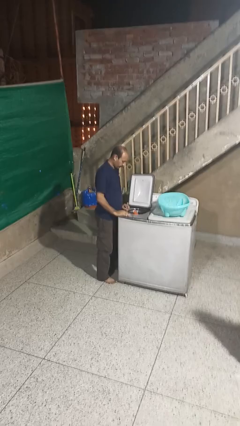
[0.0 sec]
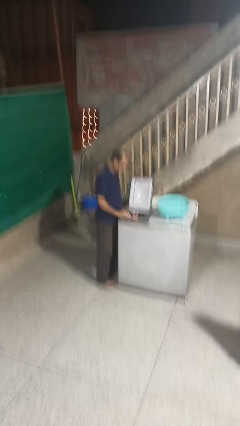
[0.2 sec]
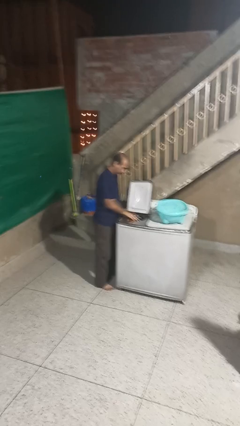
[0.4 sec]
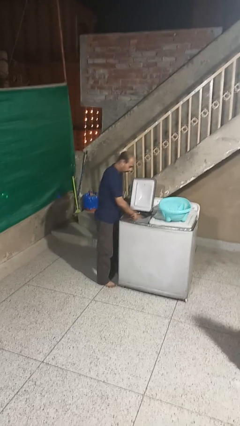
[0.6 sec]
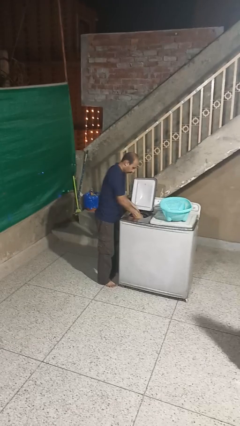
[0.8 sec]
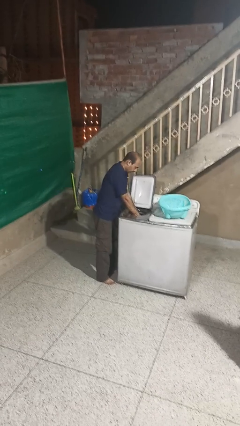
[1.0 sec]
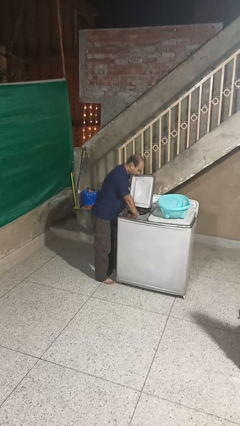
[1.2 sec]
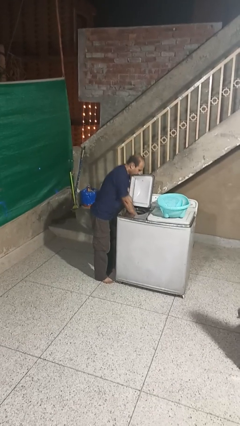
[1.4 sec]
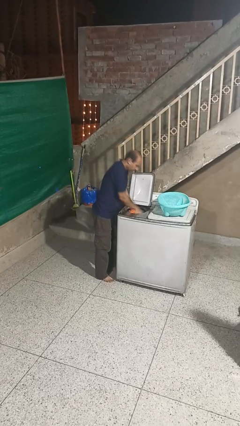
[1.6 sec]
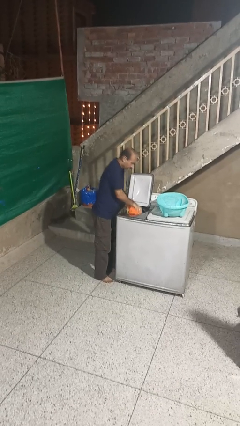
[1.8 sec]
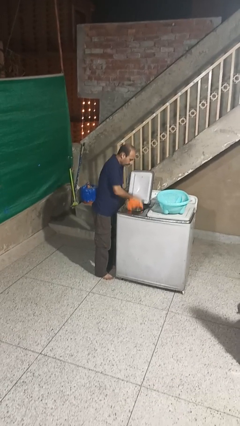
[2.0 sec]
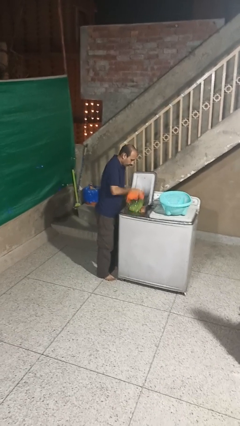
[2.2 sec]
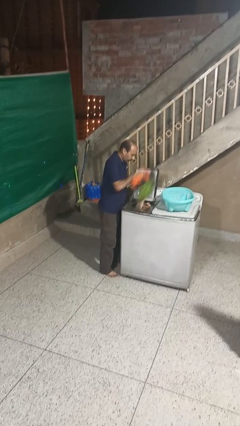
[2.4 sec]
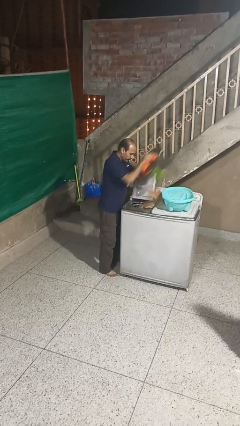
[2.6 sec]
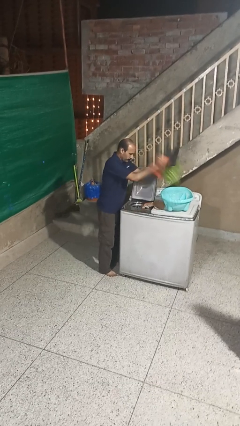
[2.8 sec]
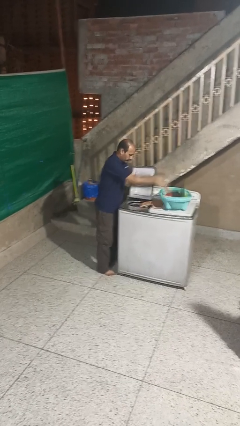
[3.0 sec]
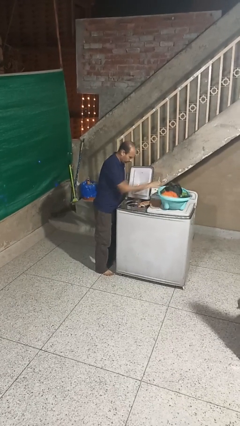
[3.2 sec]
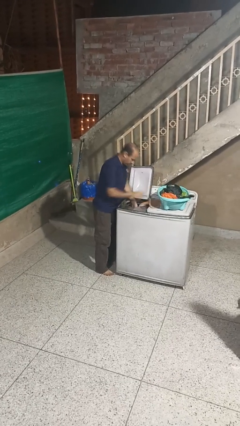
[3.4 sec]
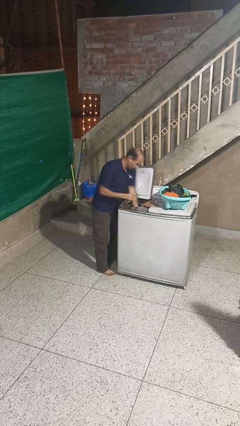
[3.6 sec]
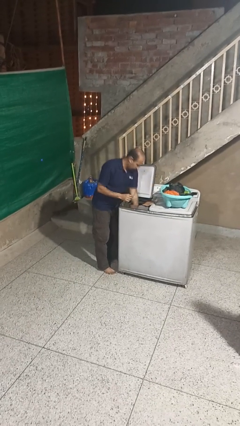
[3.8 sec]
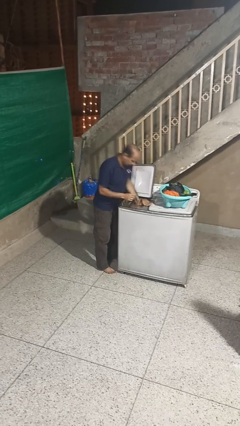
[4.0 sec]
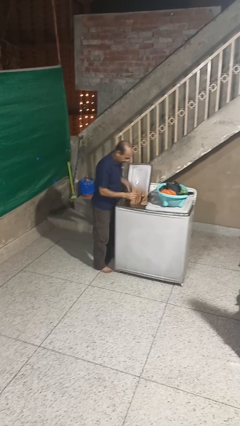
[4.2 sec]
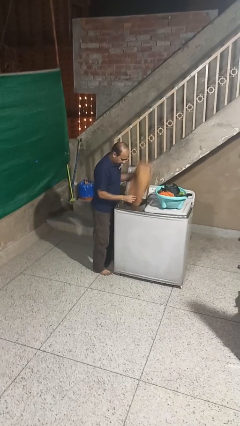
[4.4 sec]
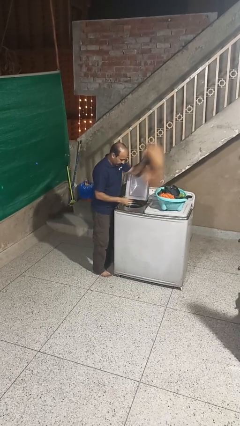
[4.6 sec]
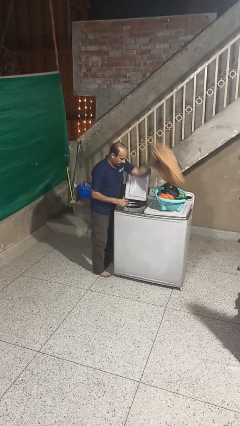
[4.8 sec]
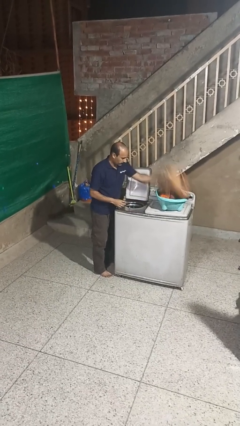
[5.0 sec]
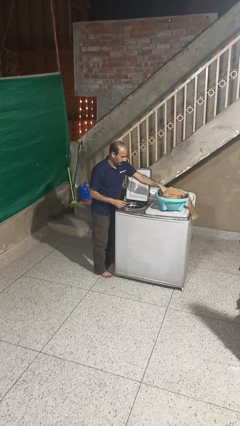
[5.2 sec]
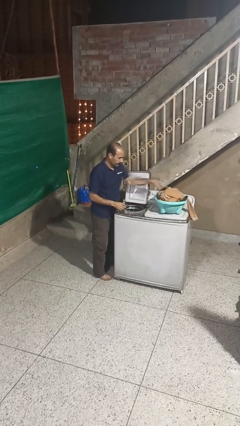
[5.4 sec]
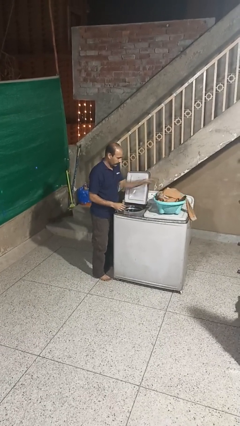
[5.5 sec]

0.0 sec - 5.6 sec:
person unloads dryer

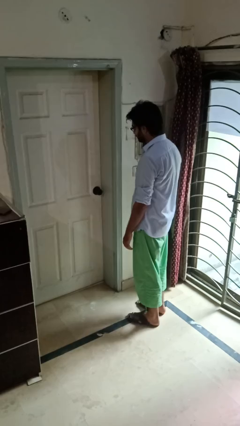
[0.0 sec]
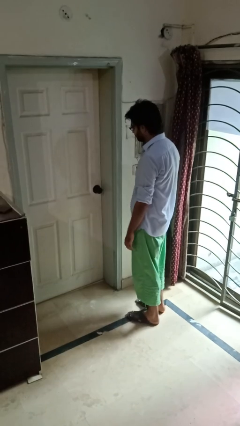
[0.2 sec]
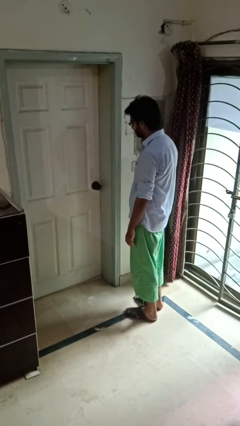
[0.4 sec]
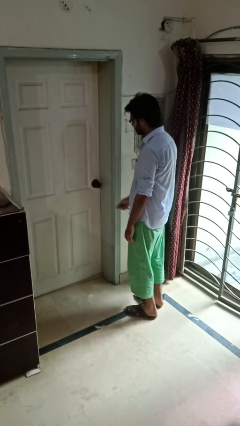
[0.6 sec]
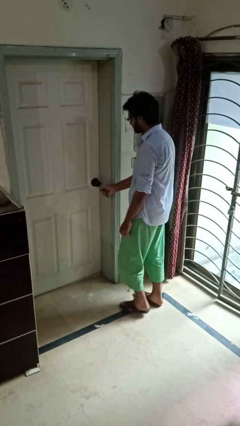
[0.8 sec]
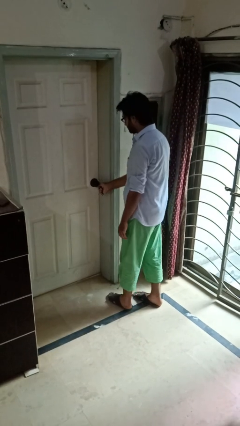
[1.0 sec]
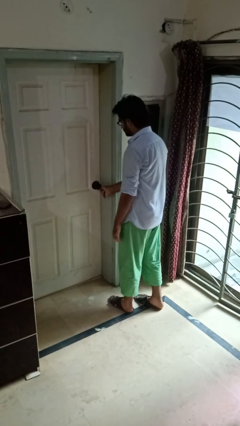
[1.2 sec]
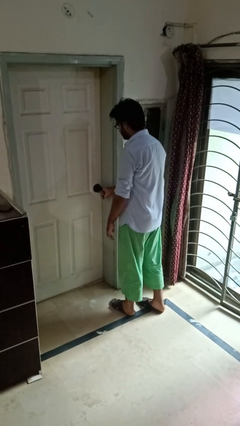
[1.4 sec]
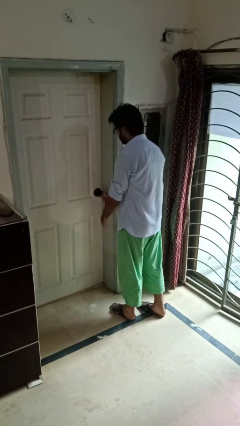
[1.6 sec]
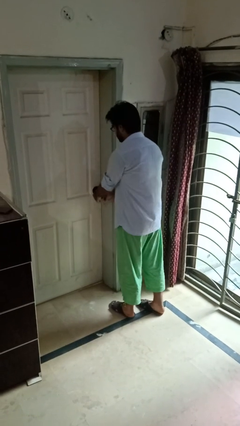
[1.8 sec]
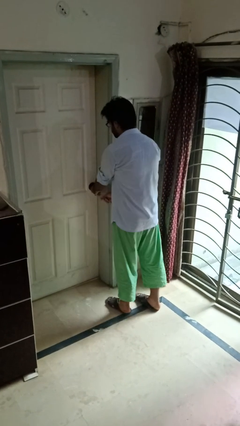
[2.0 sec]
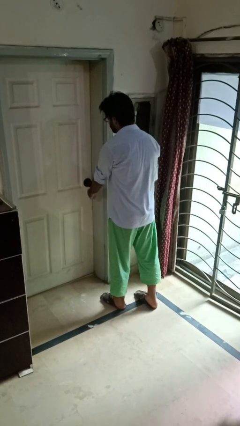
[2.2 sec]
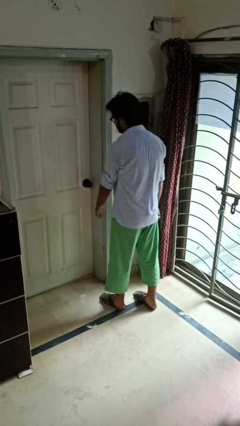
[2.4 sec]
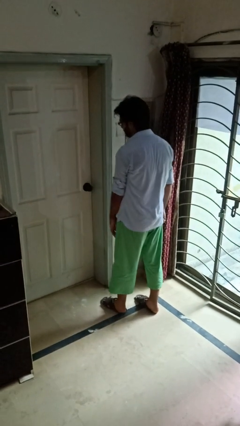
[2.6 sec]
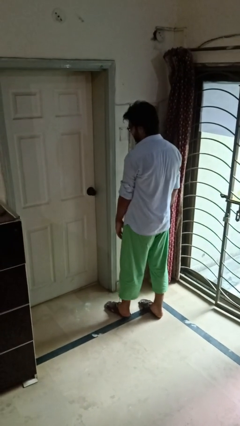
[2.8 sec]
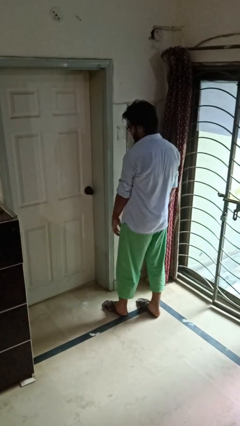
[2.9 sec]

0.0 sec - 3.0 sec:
person unlocks door with keys

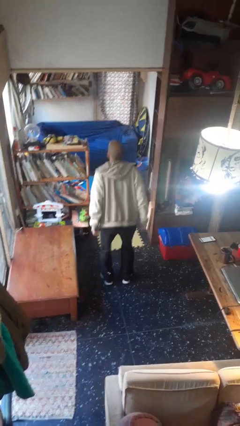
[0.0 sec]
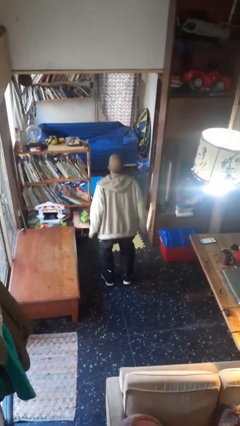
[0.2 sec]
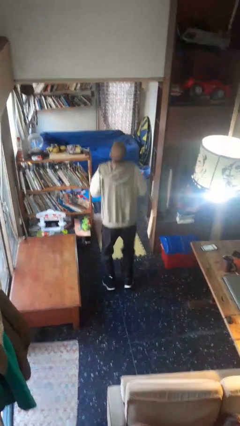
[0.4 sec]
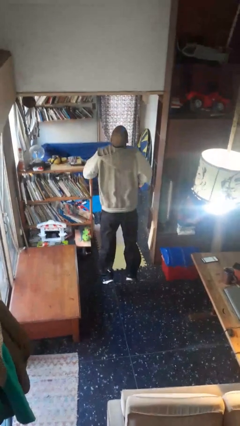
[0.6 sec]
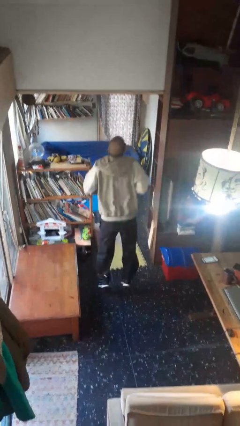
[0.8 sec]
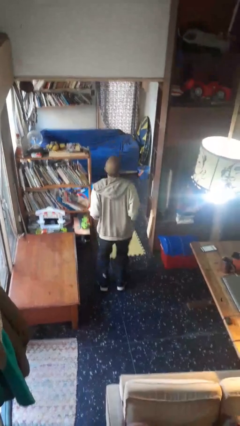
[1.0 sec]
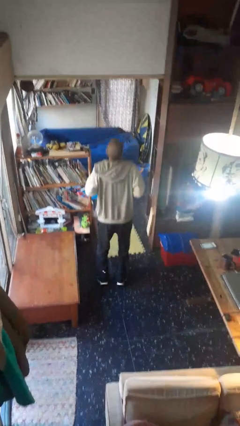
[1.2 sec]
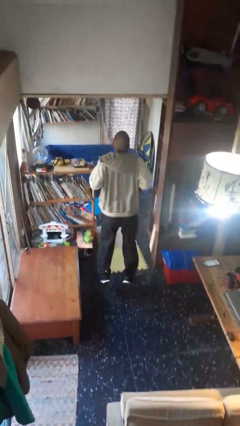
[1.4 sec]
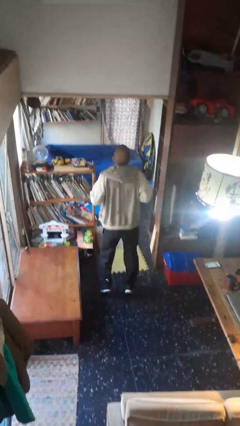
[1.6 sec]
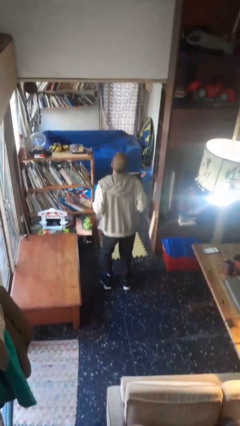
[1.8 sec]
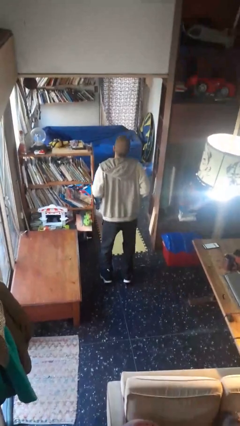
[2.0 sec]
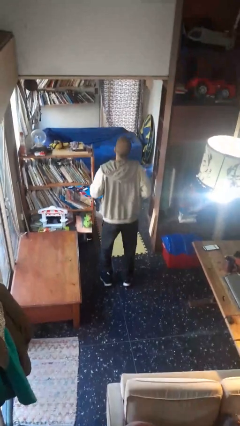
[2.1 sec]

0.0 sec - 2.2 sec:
person jumps

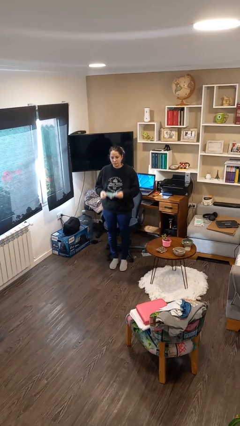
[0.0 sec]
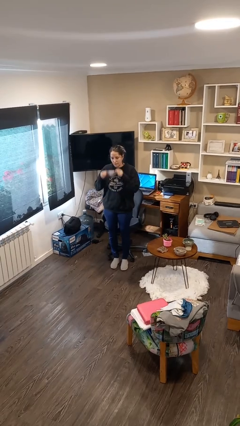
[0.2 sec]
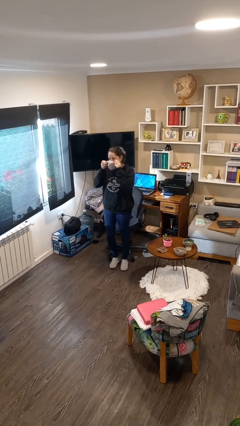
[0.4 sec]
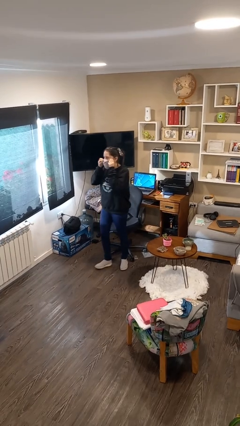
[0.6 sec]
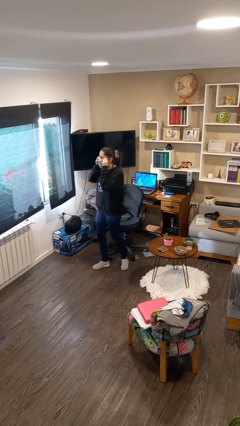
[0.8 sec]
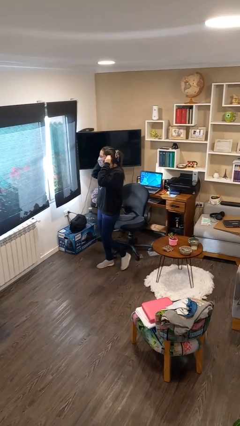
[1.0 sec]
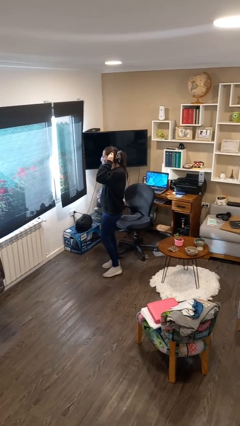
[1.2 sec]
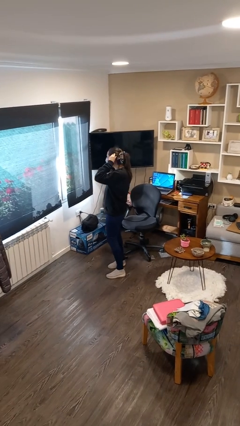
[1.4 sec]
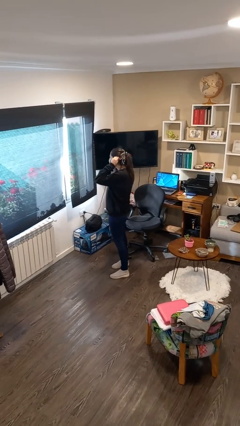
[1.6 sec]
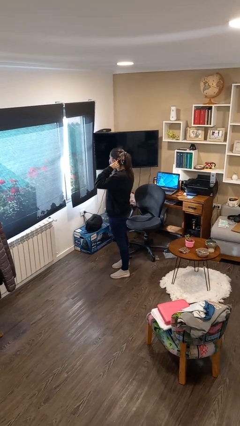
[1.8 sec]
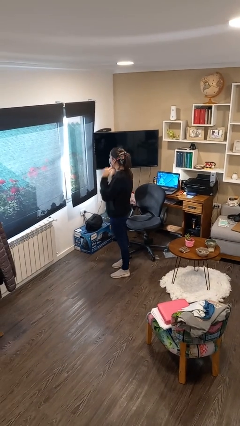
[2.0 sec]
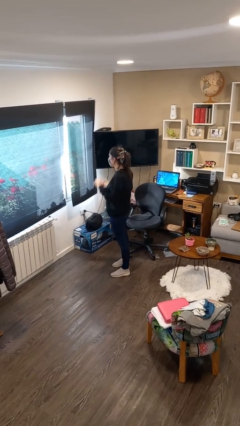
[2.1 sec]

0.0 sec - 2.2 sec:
person puts on facemask

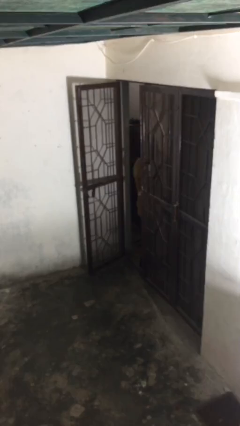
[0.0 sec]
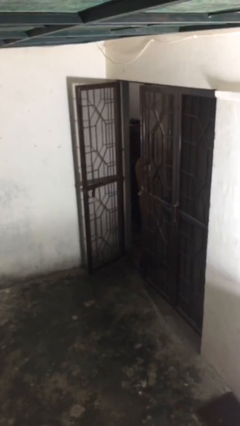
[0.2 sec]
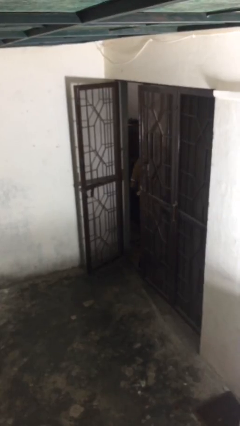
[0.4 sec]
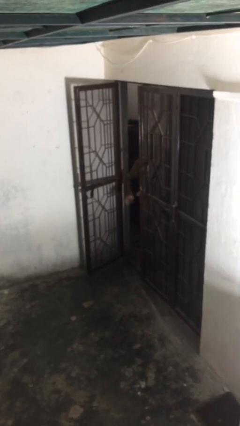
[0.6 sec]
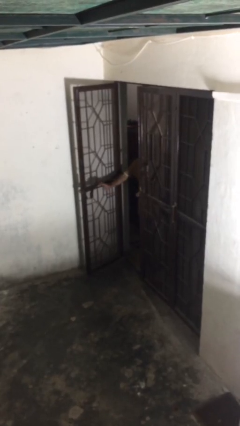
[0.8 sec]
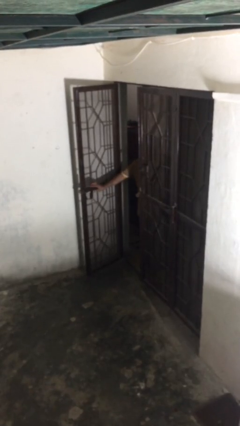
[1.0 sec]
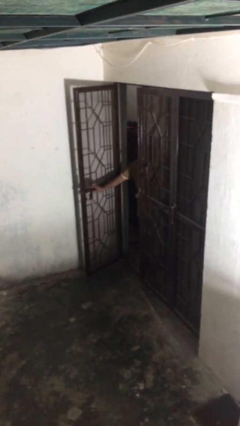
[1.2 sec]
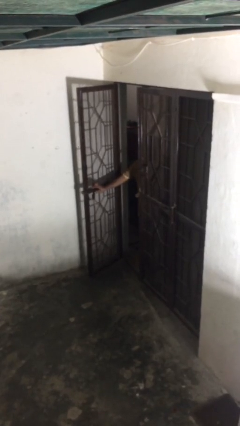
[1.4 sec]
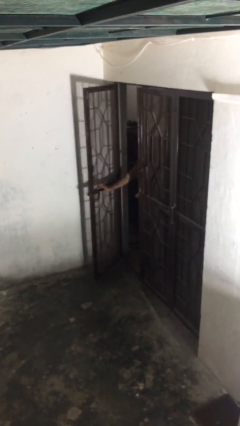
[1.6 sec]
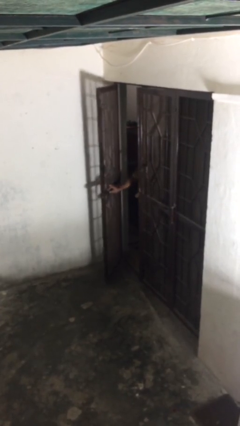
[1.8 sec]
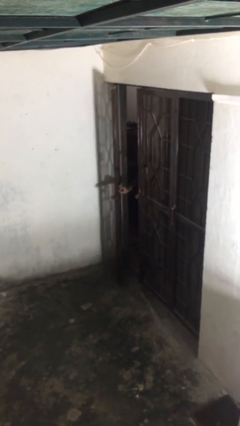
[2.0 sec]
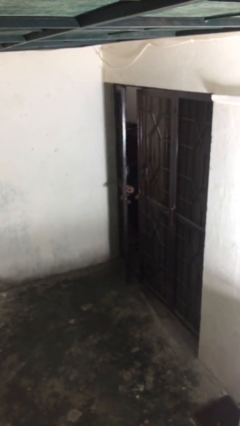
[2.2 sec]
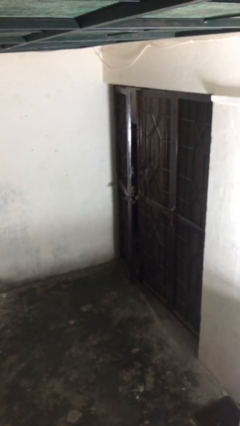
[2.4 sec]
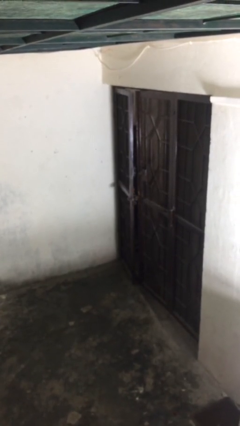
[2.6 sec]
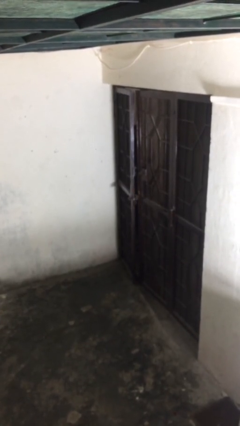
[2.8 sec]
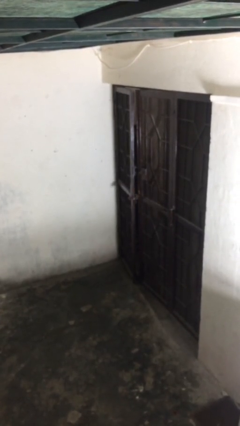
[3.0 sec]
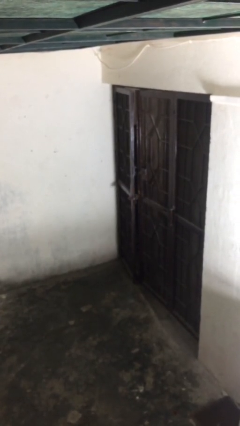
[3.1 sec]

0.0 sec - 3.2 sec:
person closes facility door

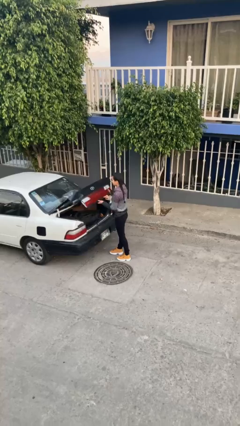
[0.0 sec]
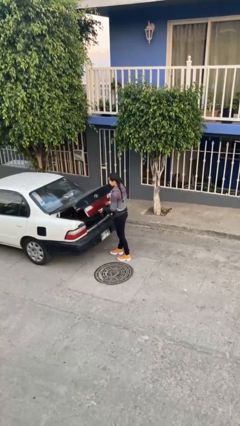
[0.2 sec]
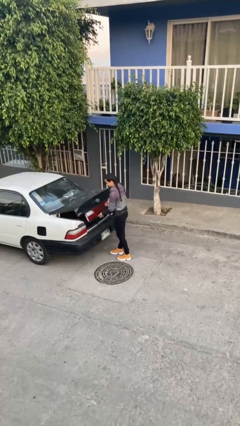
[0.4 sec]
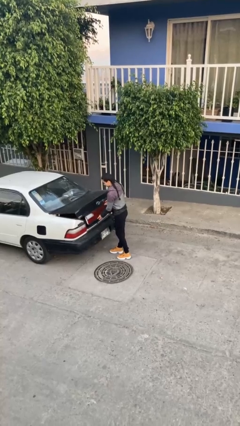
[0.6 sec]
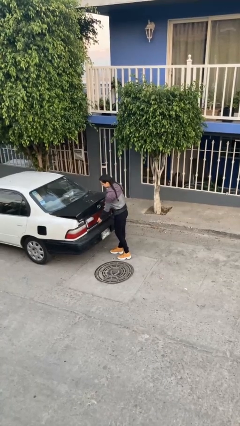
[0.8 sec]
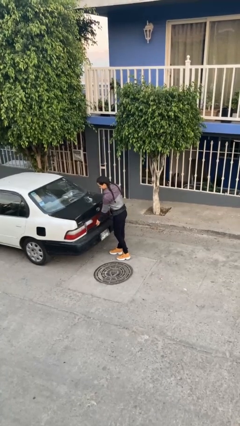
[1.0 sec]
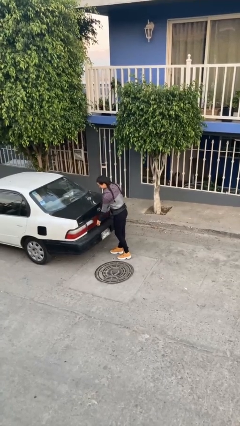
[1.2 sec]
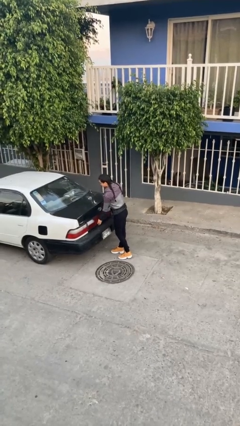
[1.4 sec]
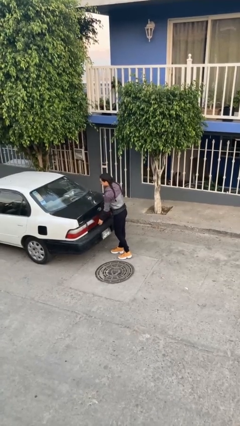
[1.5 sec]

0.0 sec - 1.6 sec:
person closes car trunk
